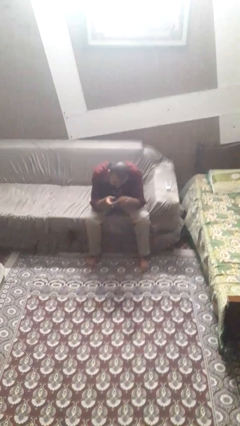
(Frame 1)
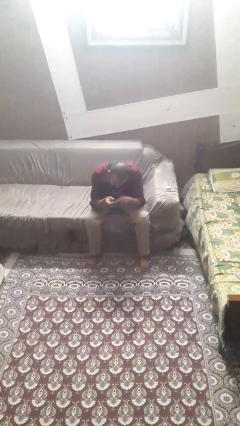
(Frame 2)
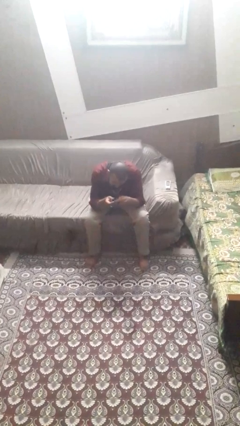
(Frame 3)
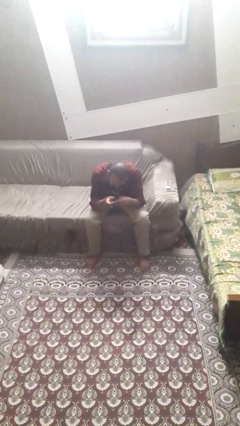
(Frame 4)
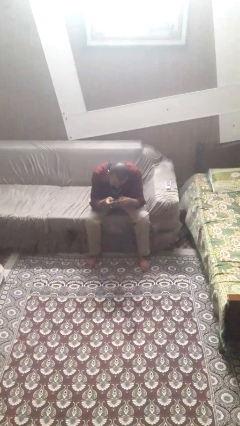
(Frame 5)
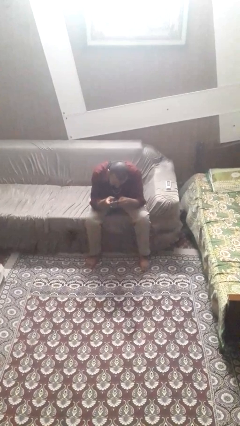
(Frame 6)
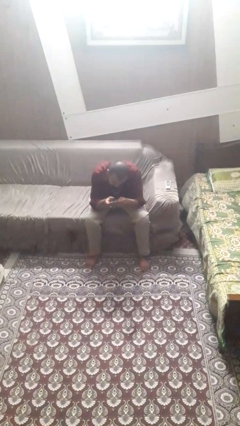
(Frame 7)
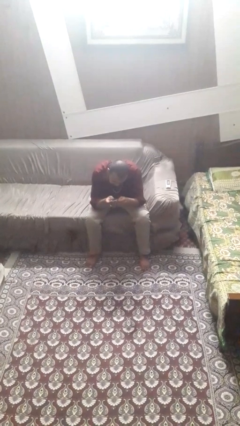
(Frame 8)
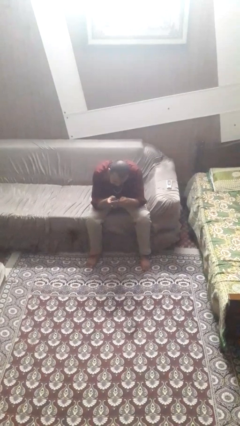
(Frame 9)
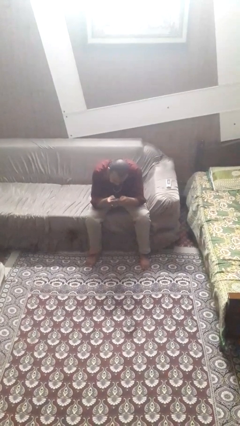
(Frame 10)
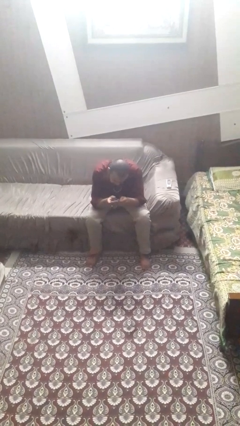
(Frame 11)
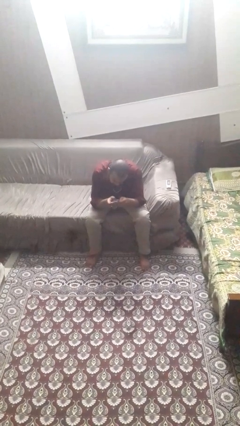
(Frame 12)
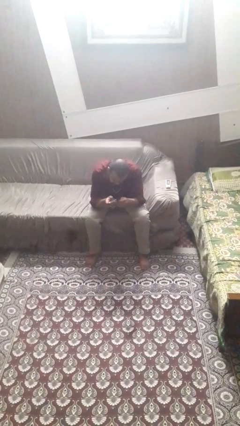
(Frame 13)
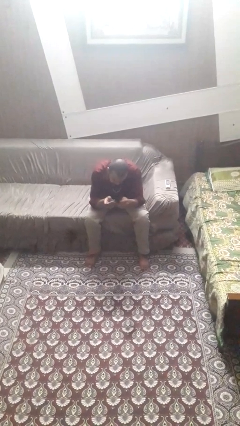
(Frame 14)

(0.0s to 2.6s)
person clips fingernails

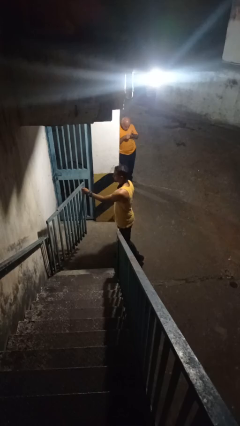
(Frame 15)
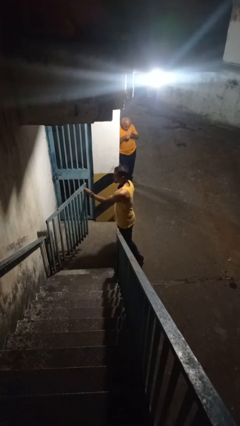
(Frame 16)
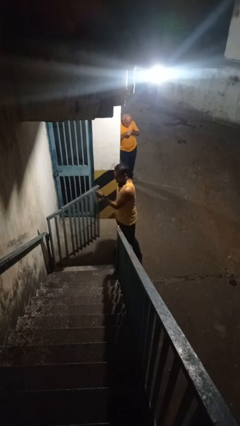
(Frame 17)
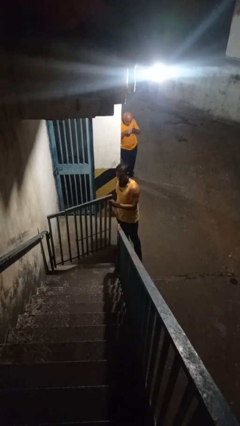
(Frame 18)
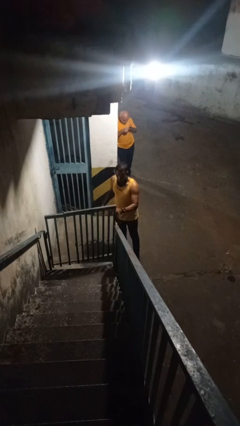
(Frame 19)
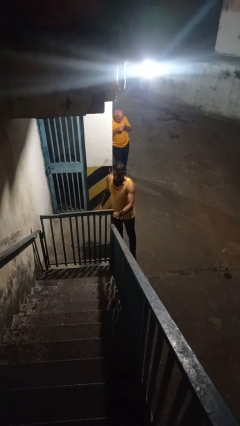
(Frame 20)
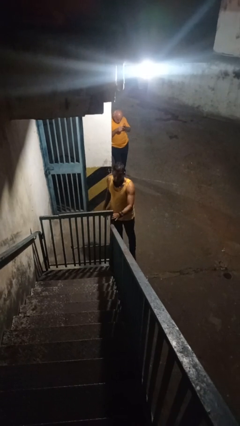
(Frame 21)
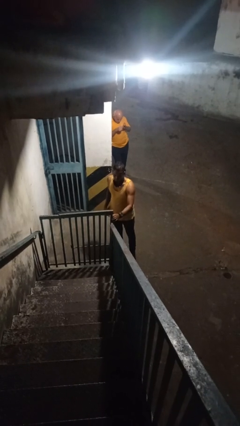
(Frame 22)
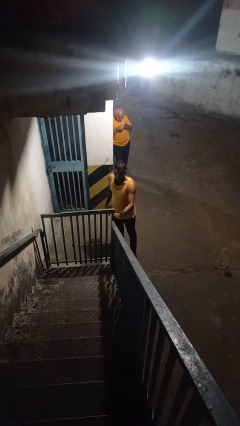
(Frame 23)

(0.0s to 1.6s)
person closes facility door

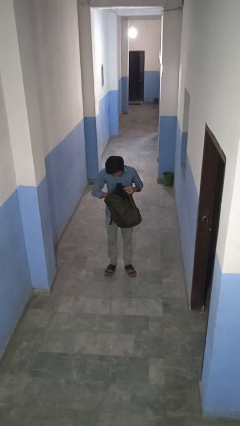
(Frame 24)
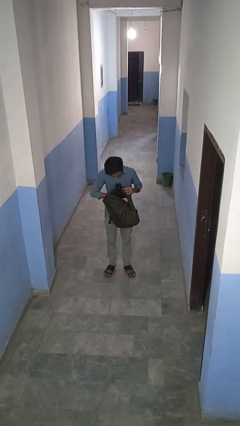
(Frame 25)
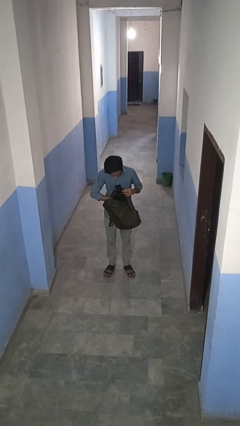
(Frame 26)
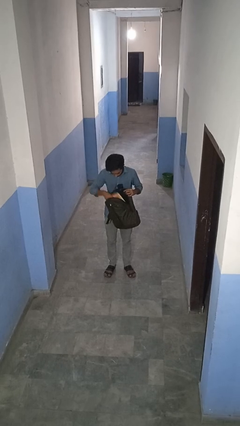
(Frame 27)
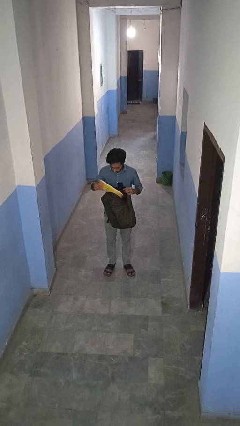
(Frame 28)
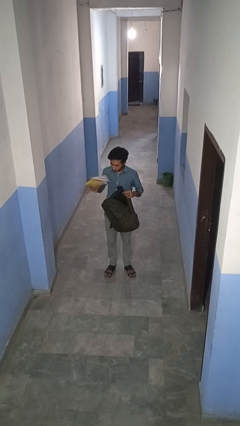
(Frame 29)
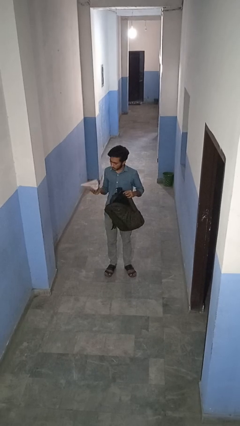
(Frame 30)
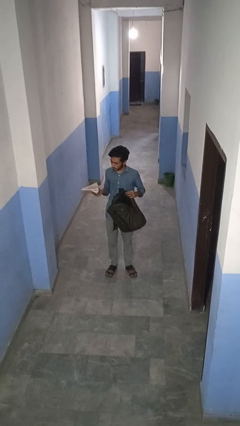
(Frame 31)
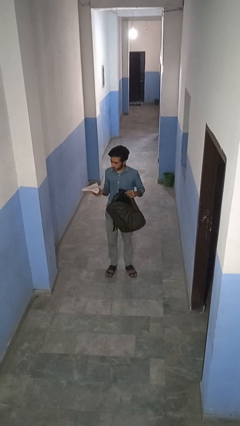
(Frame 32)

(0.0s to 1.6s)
person takes object from backpack

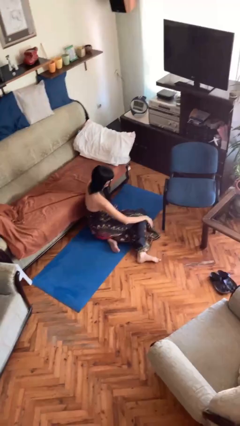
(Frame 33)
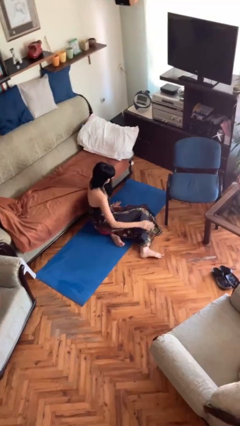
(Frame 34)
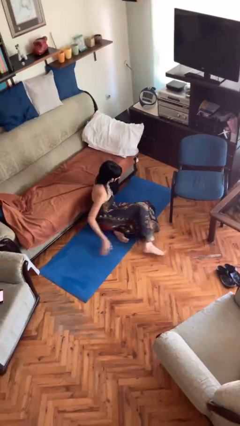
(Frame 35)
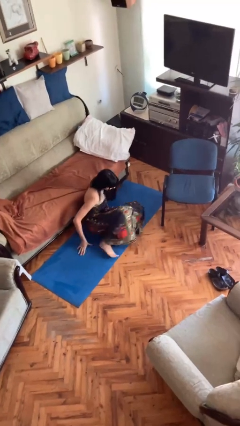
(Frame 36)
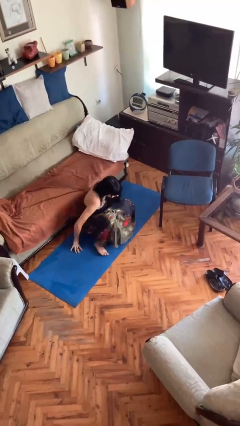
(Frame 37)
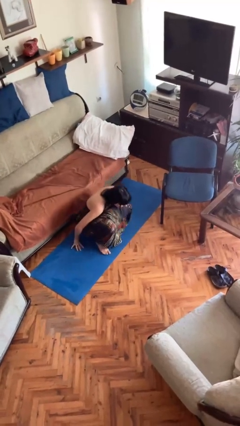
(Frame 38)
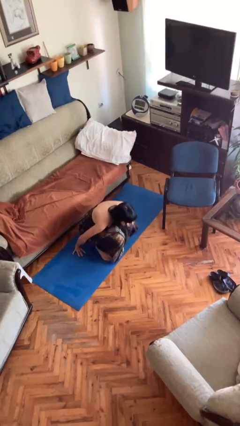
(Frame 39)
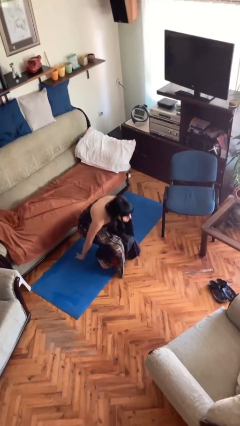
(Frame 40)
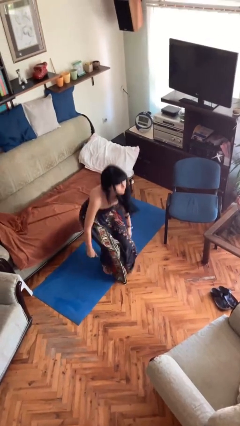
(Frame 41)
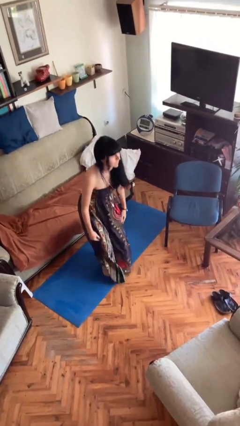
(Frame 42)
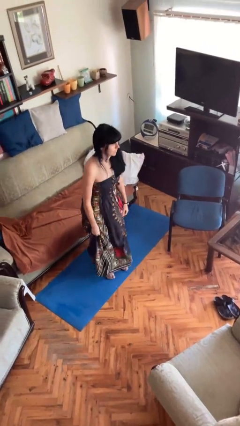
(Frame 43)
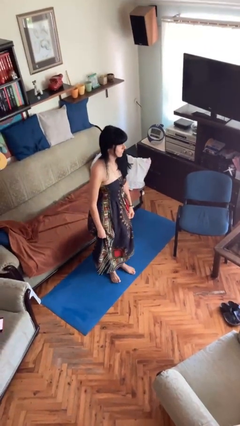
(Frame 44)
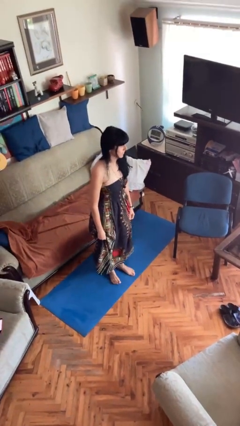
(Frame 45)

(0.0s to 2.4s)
person stands up from floor

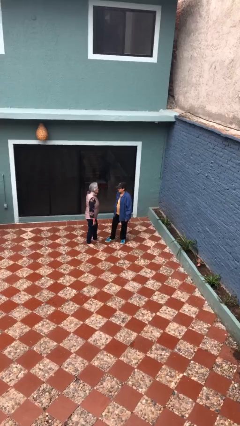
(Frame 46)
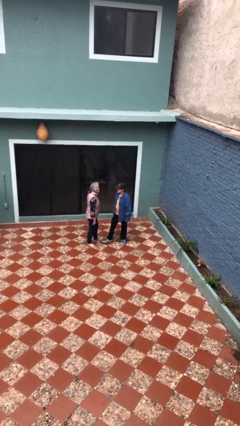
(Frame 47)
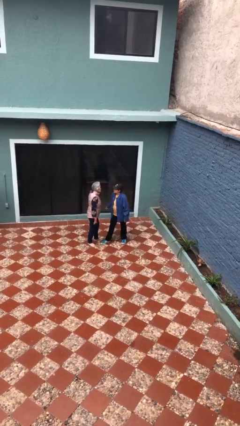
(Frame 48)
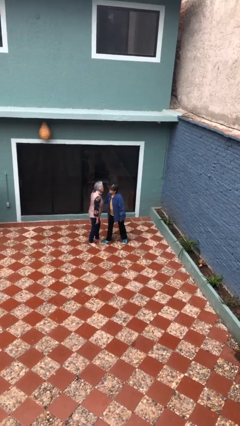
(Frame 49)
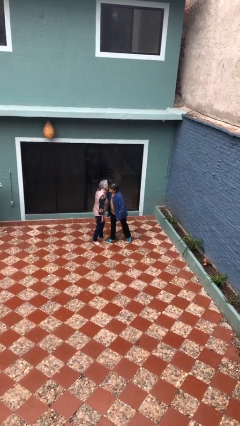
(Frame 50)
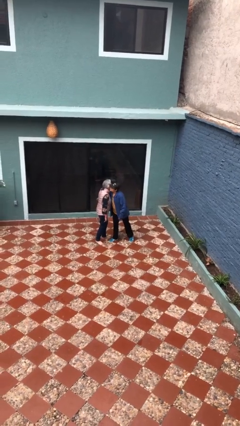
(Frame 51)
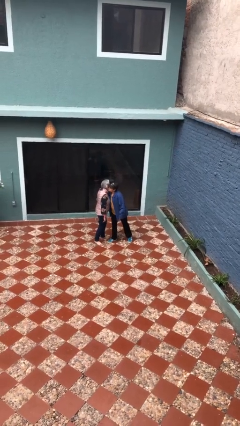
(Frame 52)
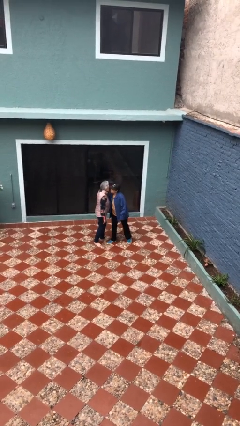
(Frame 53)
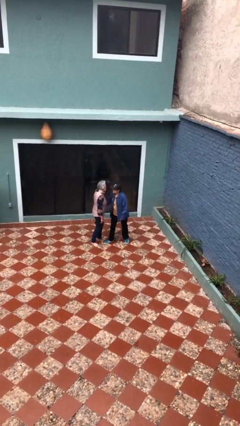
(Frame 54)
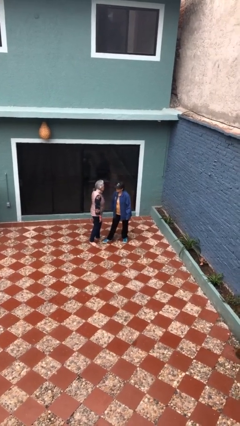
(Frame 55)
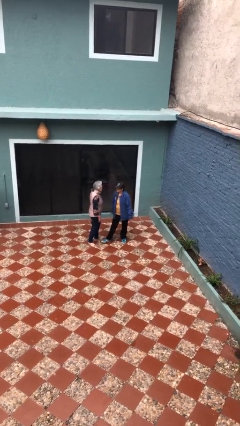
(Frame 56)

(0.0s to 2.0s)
person kisses cheek of person

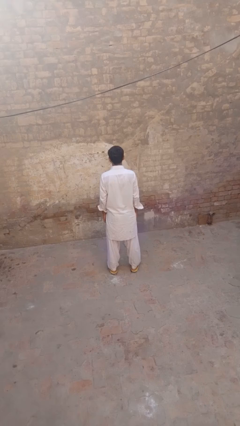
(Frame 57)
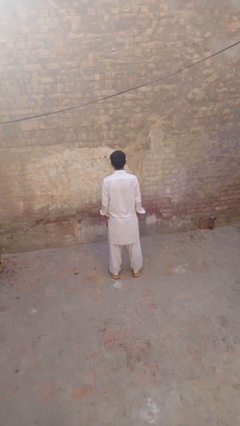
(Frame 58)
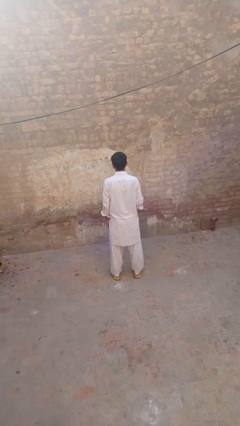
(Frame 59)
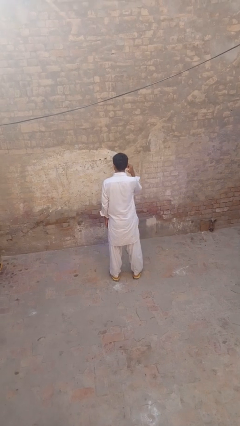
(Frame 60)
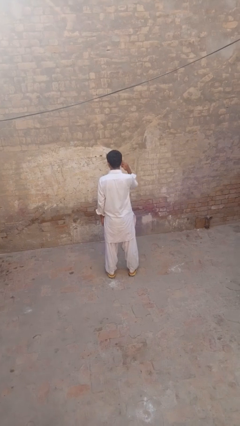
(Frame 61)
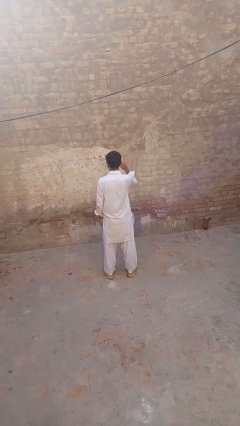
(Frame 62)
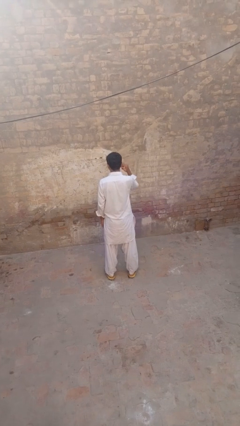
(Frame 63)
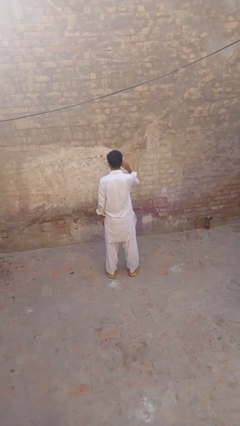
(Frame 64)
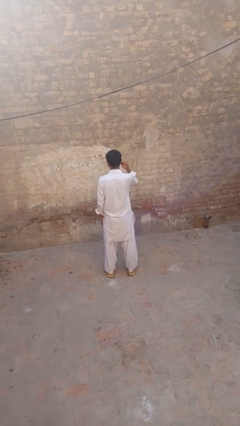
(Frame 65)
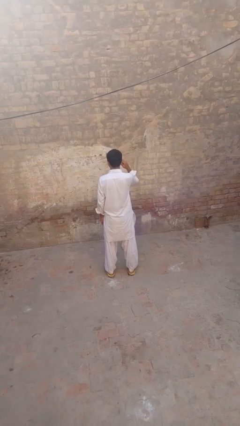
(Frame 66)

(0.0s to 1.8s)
person touches earlobe

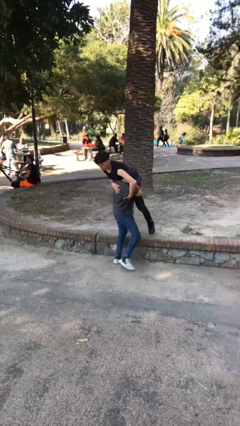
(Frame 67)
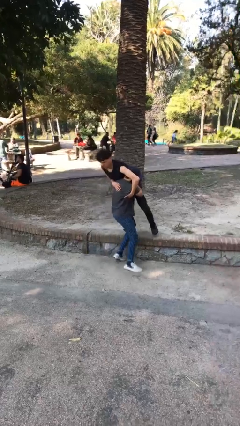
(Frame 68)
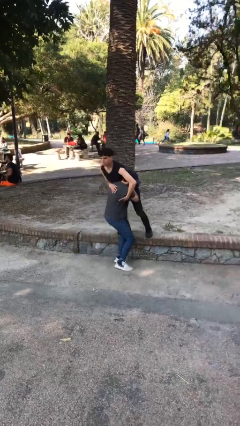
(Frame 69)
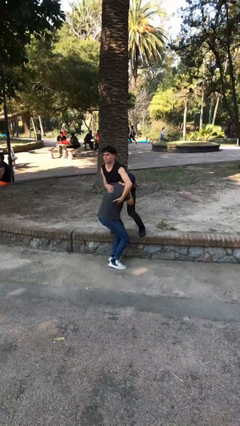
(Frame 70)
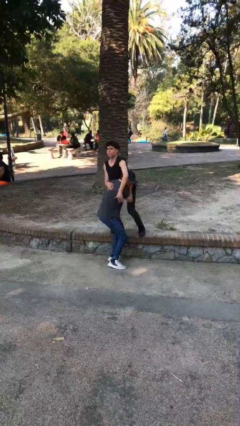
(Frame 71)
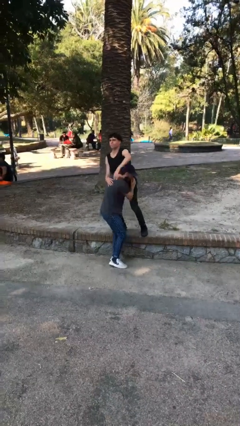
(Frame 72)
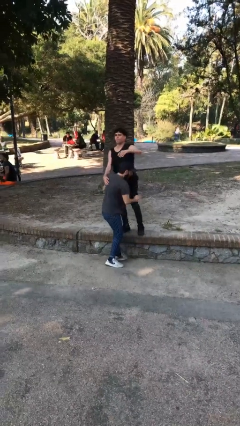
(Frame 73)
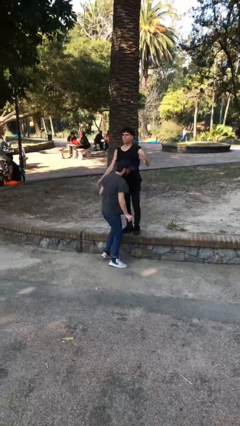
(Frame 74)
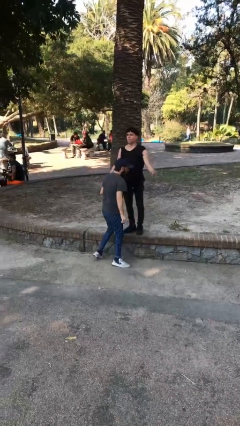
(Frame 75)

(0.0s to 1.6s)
person puts down person

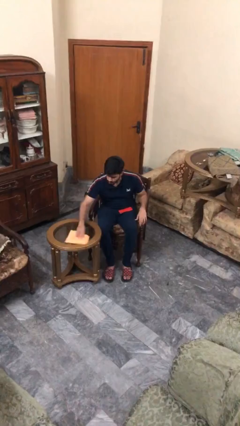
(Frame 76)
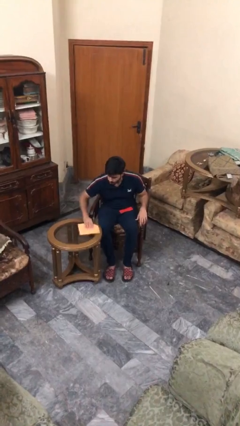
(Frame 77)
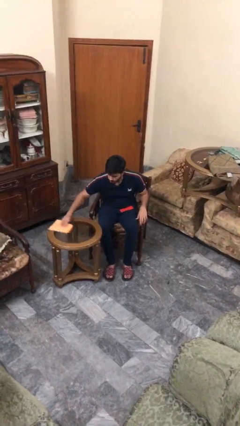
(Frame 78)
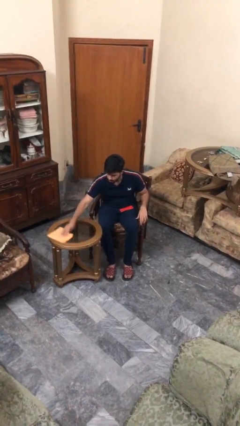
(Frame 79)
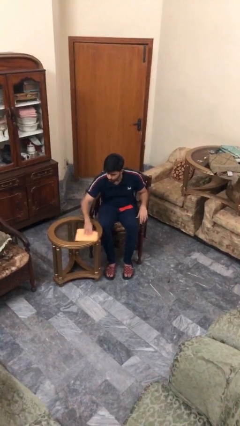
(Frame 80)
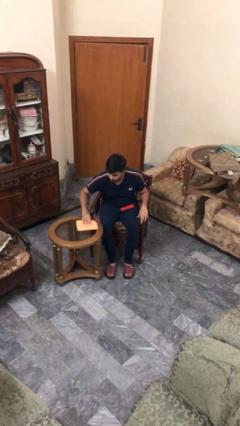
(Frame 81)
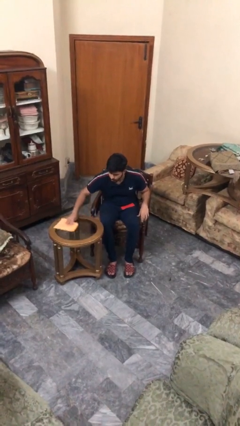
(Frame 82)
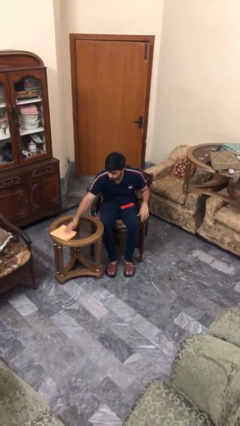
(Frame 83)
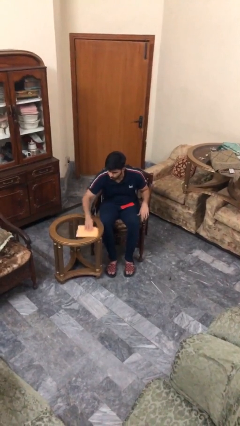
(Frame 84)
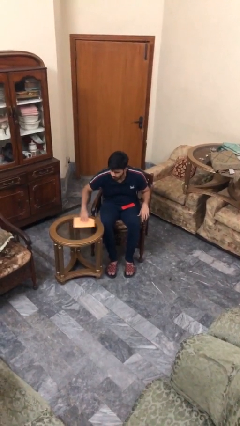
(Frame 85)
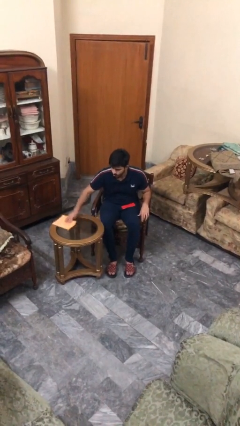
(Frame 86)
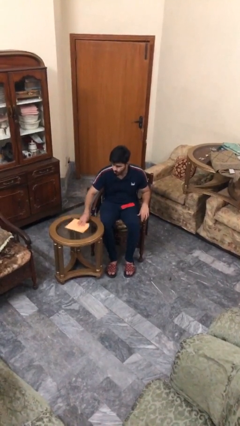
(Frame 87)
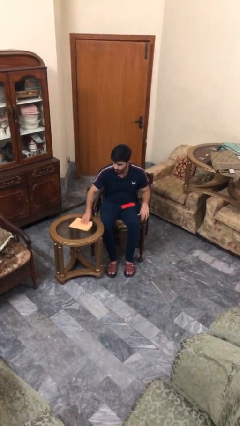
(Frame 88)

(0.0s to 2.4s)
person cleans table with rag

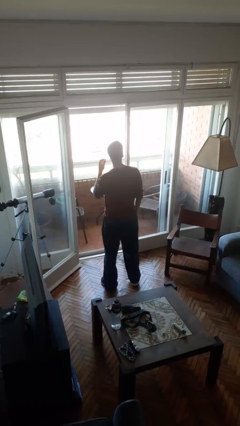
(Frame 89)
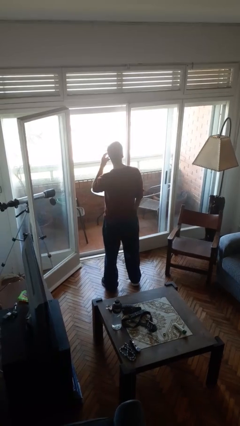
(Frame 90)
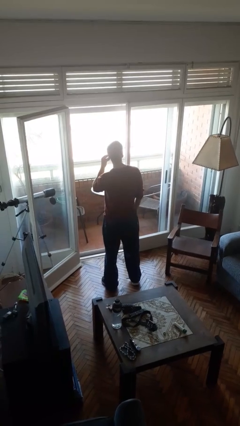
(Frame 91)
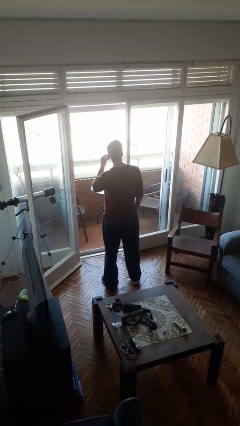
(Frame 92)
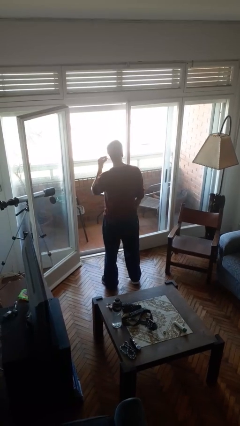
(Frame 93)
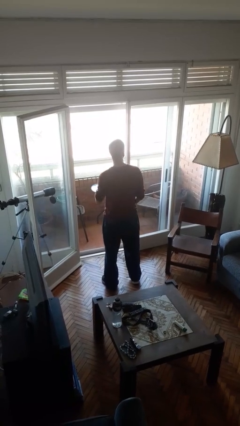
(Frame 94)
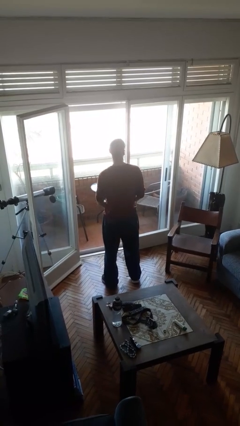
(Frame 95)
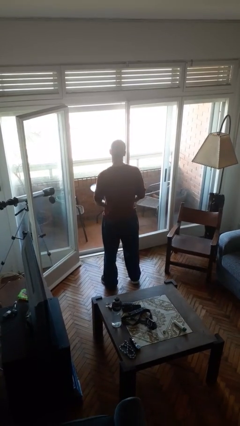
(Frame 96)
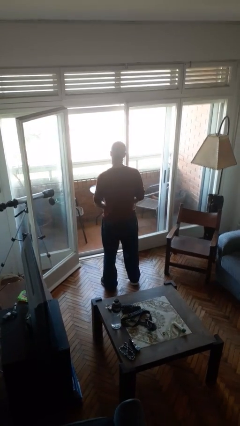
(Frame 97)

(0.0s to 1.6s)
person takes off earrings
